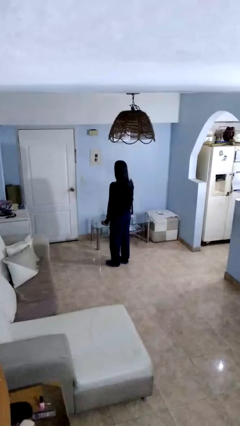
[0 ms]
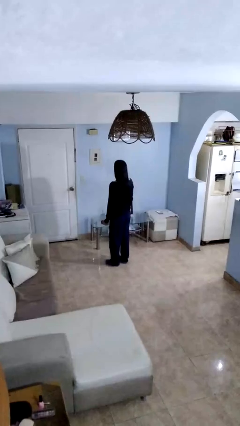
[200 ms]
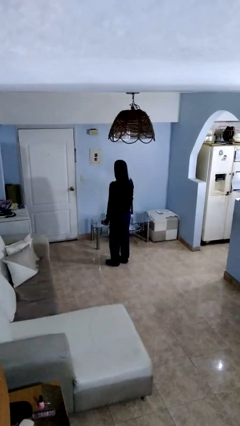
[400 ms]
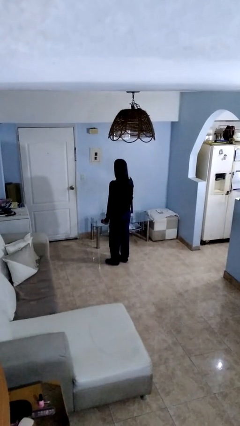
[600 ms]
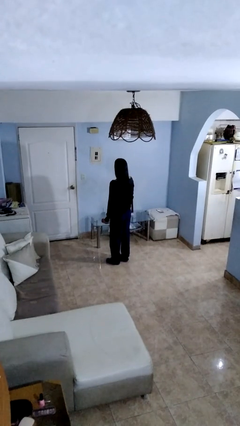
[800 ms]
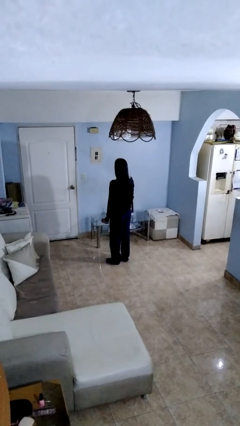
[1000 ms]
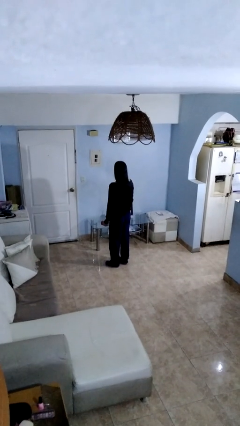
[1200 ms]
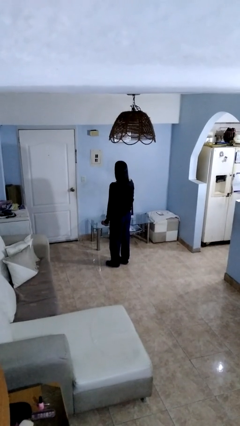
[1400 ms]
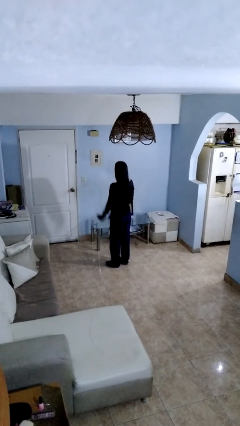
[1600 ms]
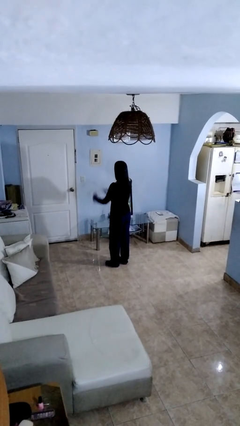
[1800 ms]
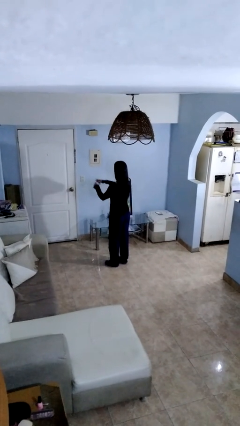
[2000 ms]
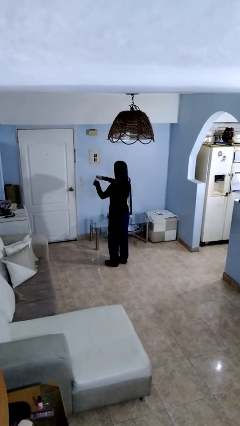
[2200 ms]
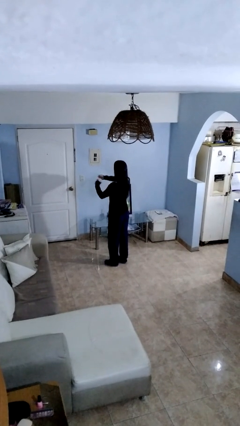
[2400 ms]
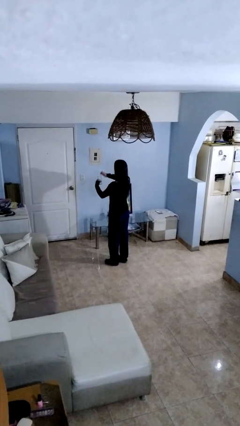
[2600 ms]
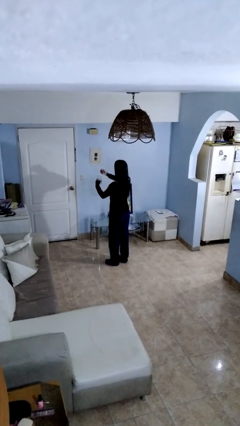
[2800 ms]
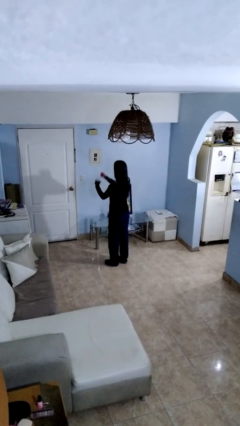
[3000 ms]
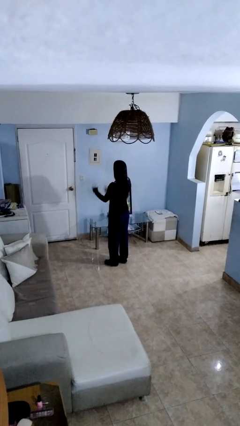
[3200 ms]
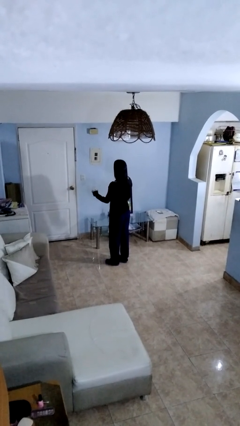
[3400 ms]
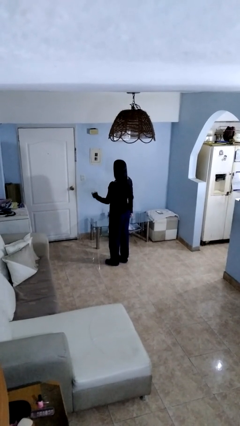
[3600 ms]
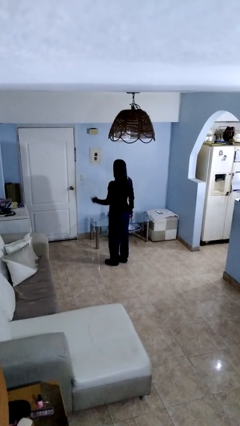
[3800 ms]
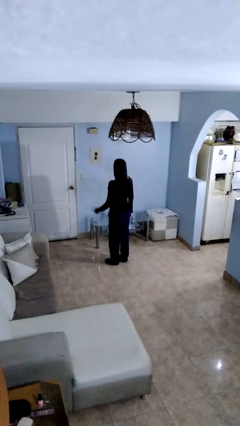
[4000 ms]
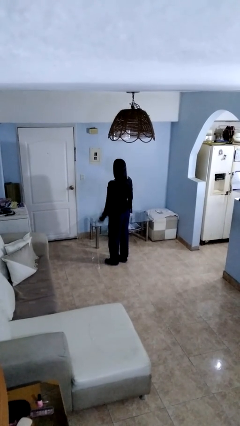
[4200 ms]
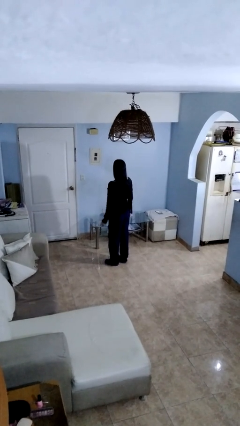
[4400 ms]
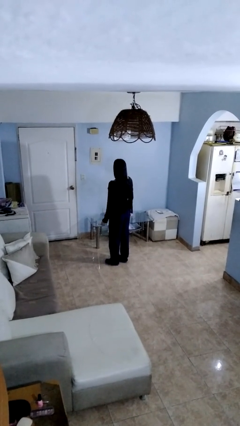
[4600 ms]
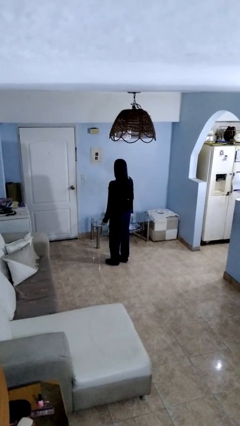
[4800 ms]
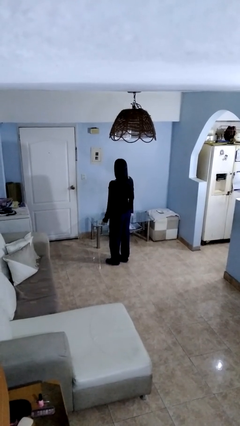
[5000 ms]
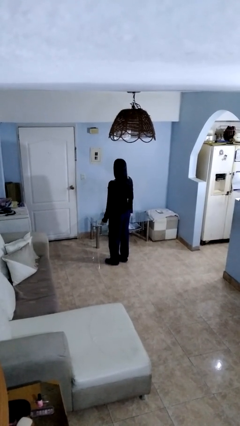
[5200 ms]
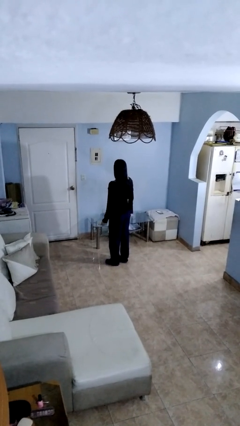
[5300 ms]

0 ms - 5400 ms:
person opens jar

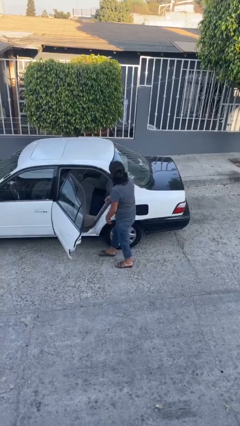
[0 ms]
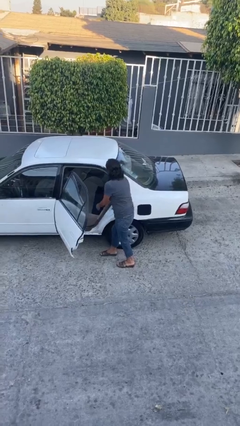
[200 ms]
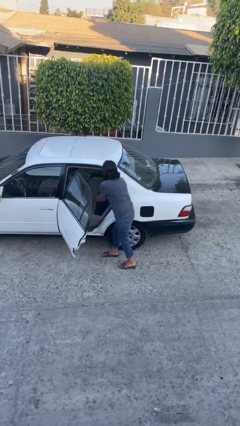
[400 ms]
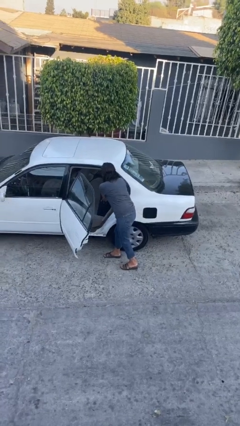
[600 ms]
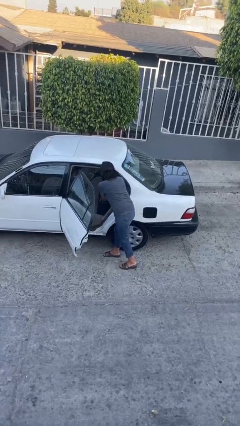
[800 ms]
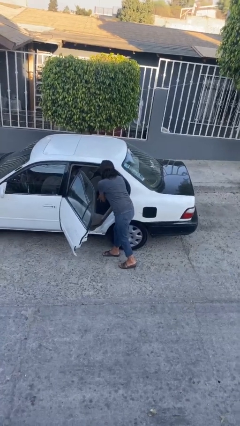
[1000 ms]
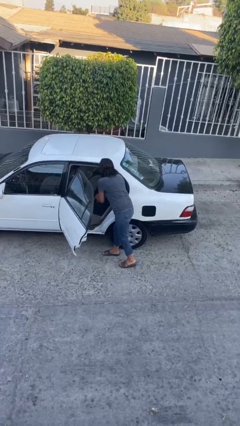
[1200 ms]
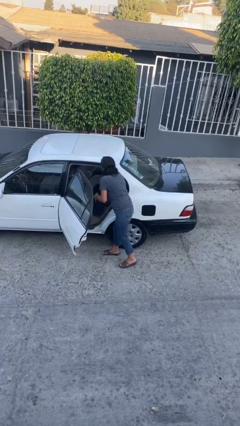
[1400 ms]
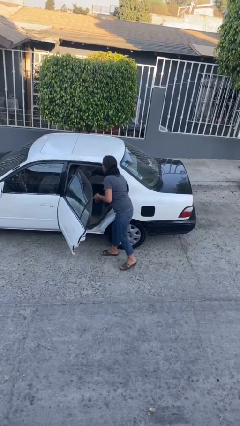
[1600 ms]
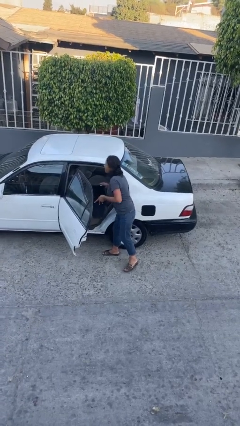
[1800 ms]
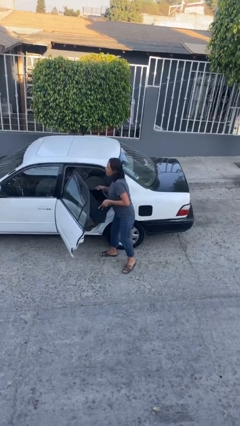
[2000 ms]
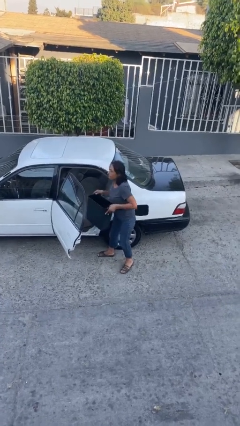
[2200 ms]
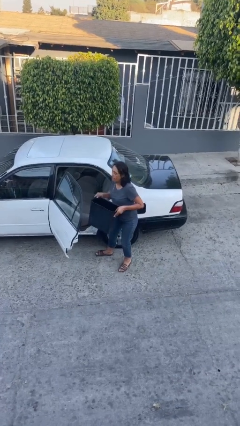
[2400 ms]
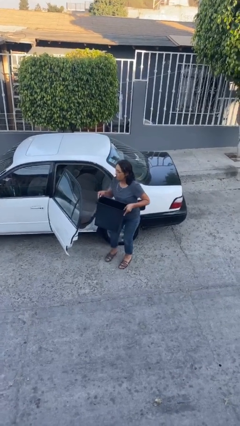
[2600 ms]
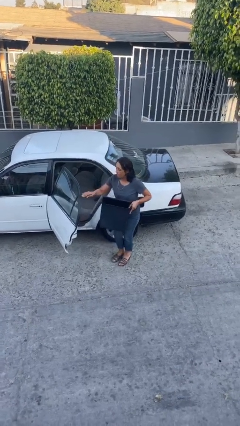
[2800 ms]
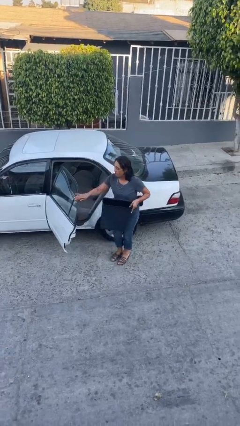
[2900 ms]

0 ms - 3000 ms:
person unloads car

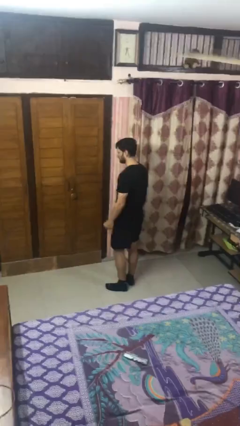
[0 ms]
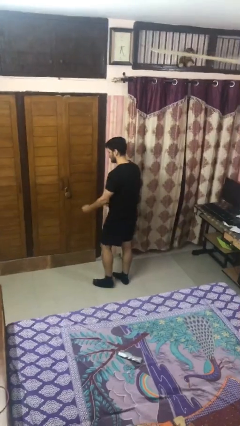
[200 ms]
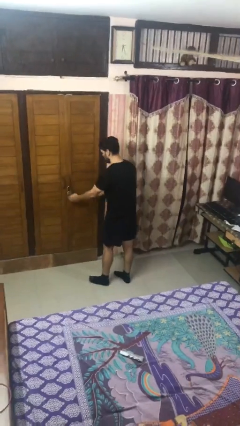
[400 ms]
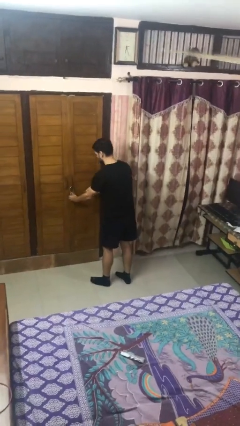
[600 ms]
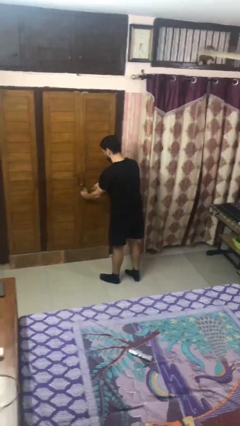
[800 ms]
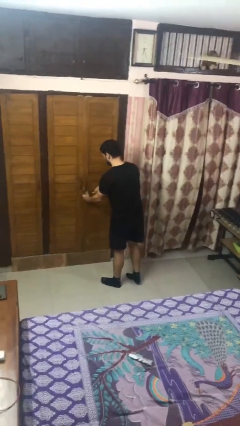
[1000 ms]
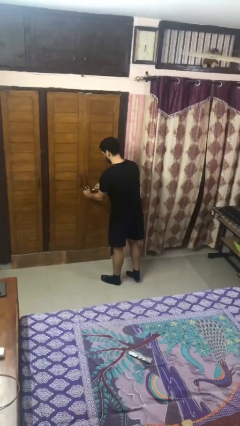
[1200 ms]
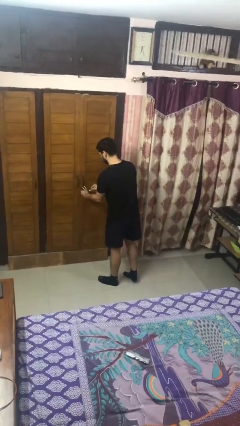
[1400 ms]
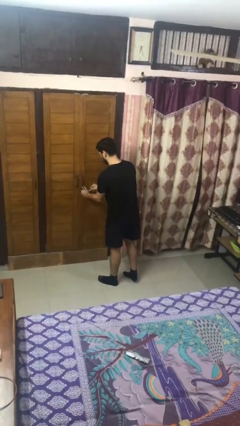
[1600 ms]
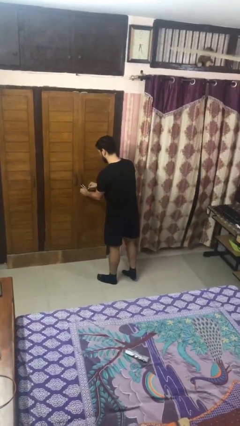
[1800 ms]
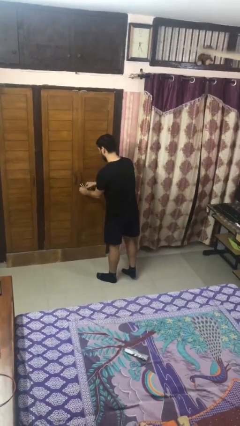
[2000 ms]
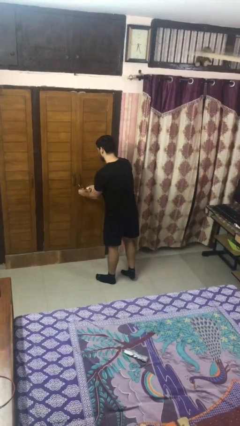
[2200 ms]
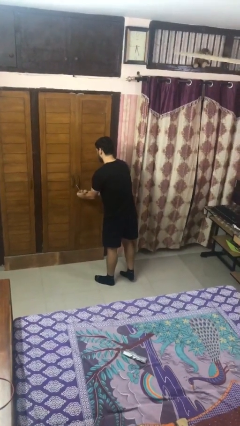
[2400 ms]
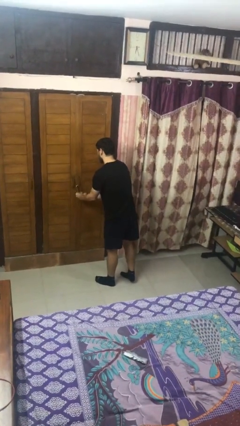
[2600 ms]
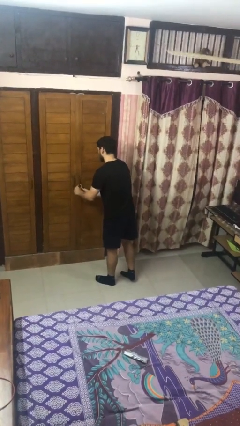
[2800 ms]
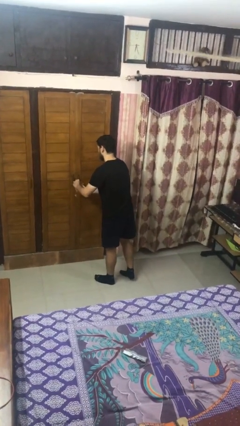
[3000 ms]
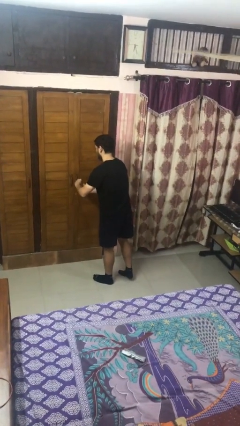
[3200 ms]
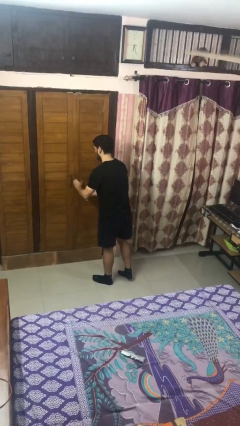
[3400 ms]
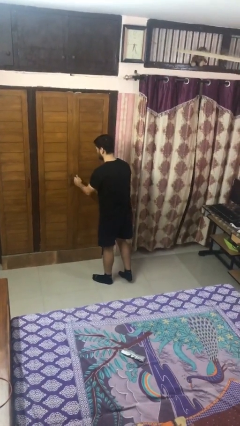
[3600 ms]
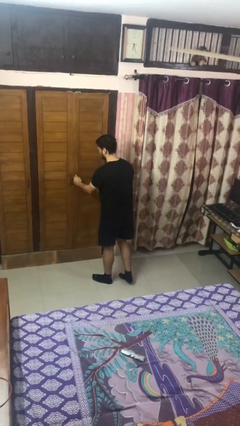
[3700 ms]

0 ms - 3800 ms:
person unlocks door with keys

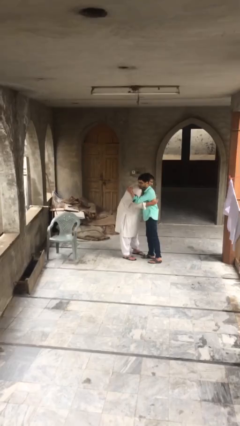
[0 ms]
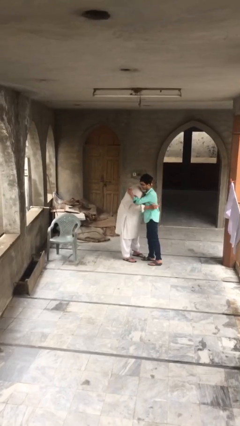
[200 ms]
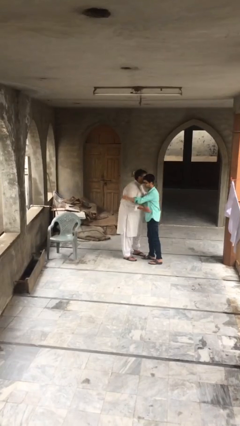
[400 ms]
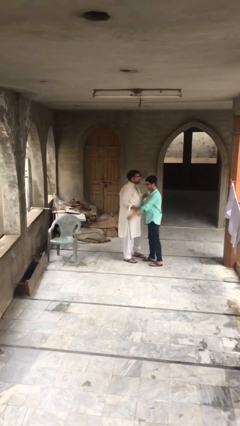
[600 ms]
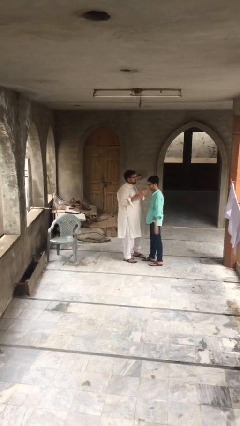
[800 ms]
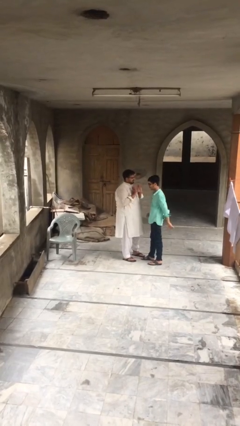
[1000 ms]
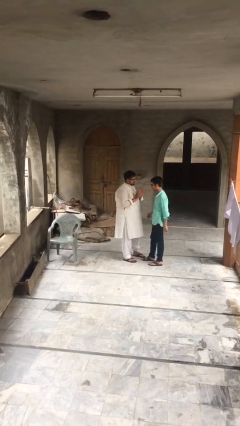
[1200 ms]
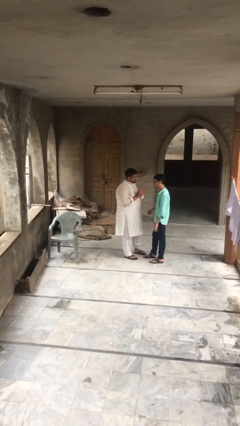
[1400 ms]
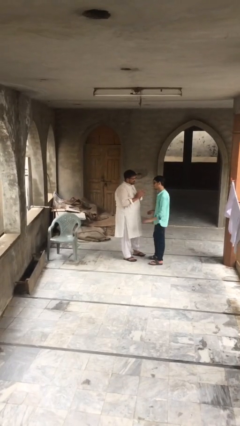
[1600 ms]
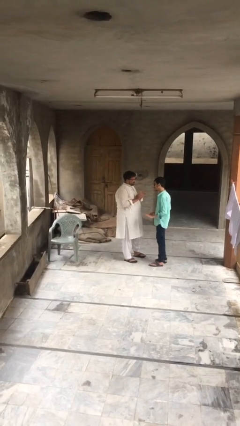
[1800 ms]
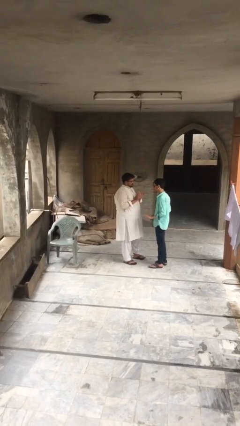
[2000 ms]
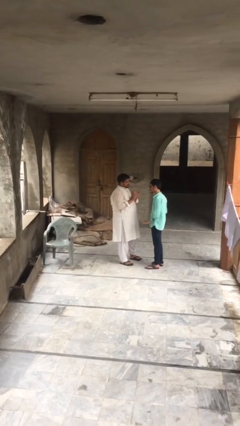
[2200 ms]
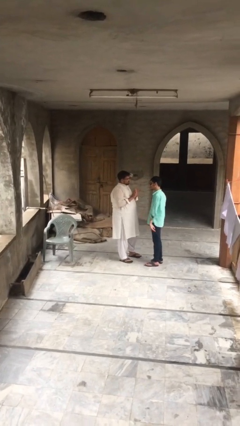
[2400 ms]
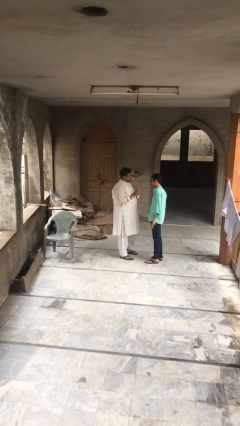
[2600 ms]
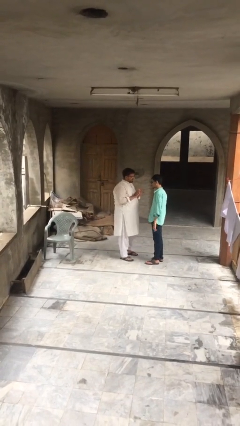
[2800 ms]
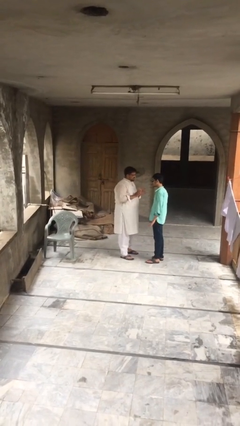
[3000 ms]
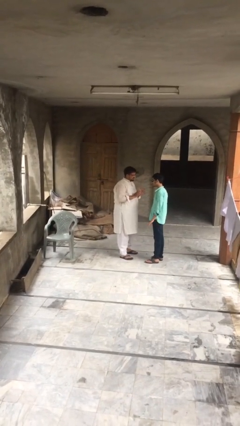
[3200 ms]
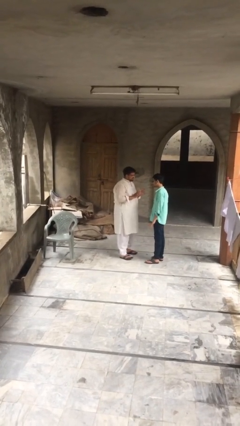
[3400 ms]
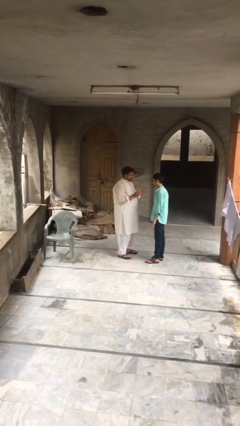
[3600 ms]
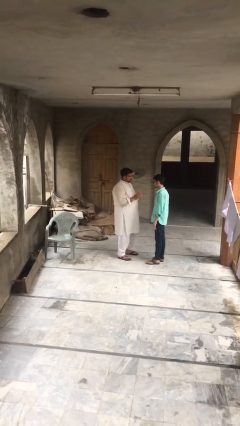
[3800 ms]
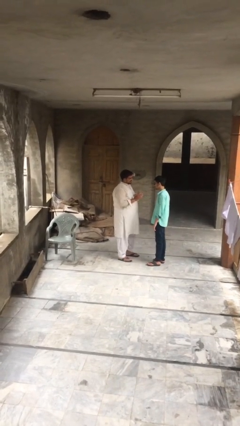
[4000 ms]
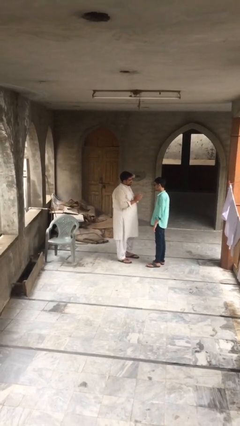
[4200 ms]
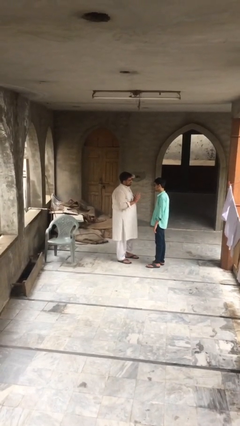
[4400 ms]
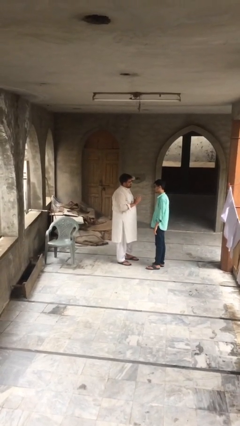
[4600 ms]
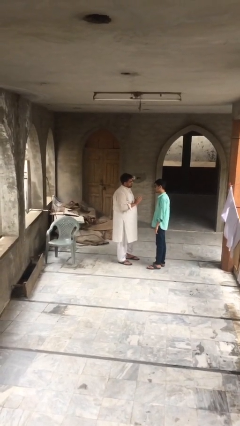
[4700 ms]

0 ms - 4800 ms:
person talks to person

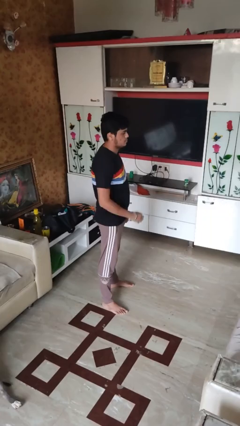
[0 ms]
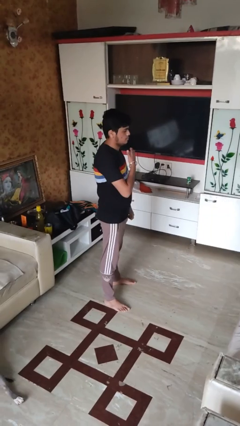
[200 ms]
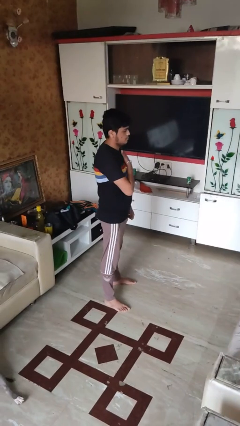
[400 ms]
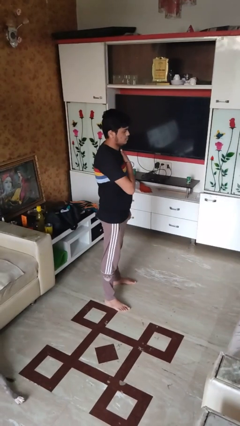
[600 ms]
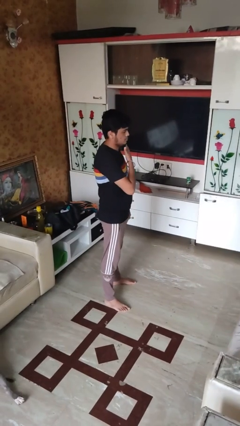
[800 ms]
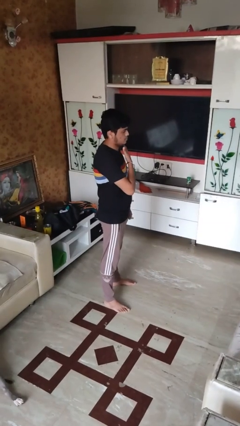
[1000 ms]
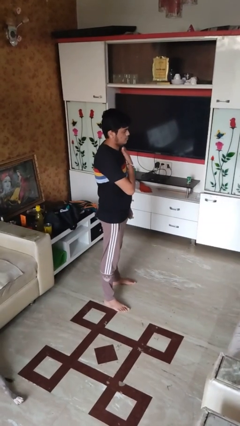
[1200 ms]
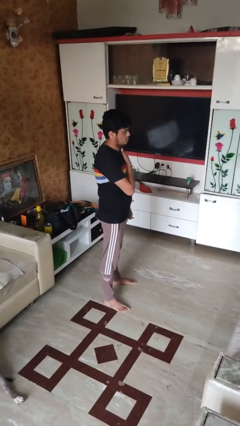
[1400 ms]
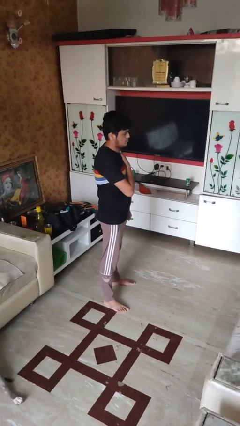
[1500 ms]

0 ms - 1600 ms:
person drums on chest
